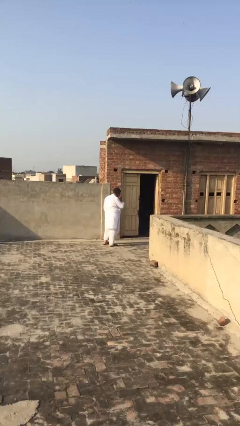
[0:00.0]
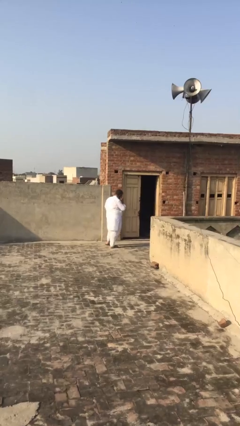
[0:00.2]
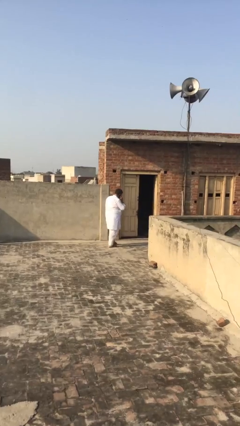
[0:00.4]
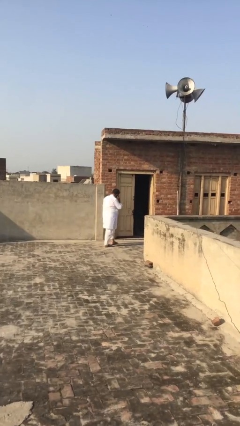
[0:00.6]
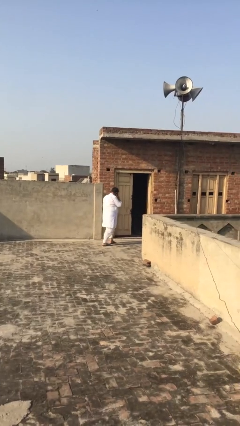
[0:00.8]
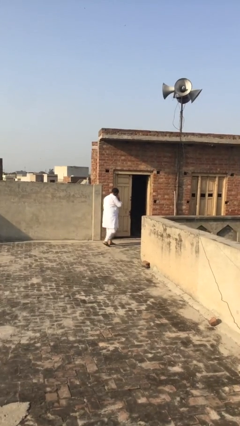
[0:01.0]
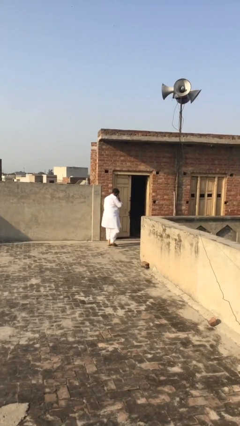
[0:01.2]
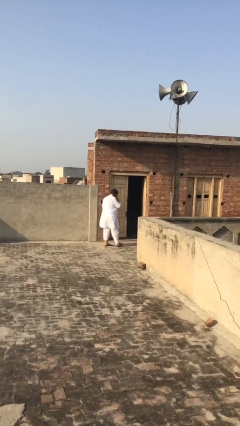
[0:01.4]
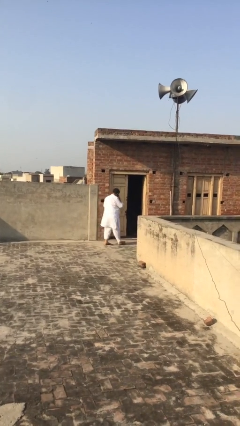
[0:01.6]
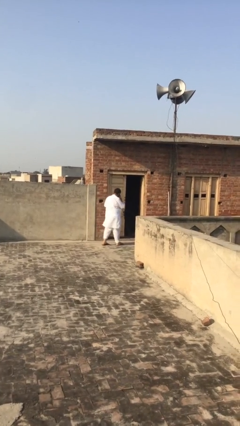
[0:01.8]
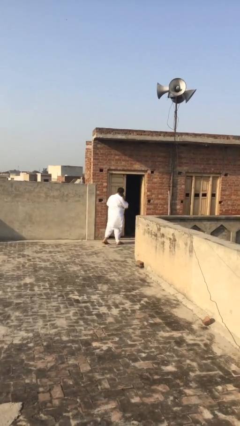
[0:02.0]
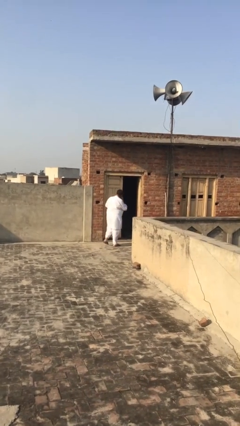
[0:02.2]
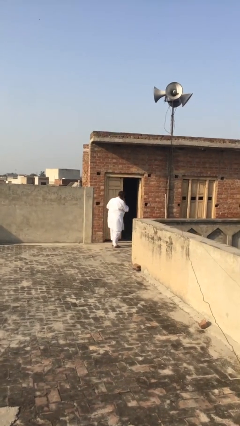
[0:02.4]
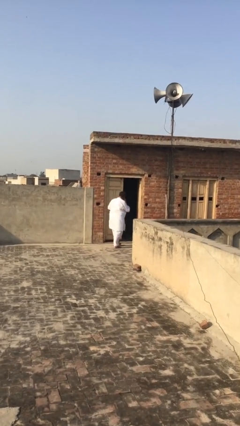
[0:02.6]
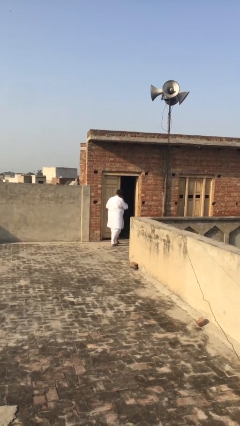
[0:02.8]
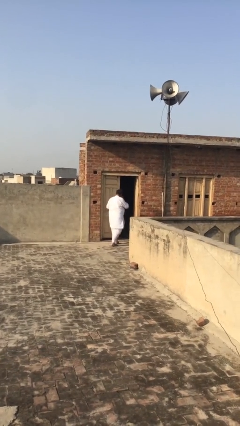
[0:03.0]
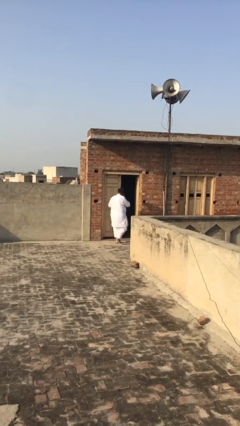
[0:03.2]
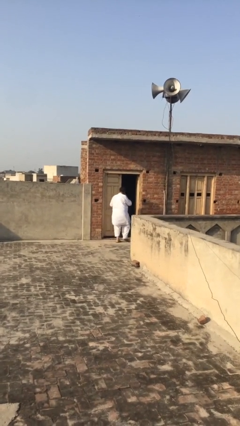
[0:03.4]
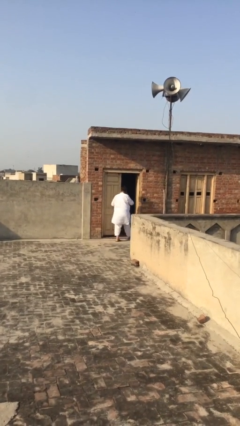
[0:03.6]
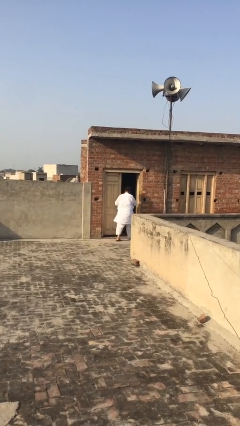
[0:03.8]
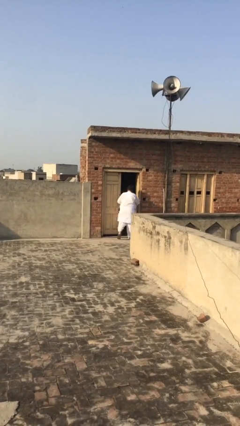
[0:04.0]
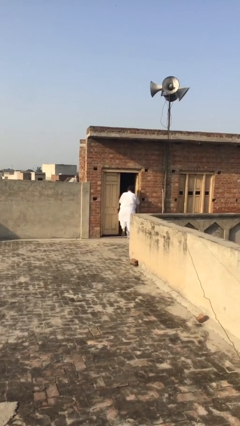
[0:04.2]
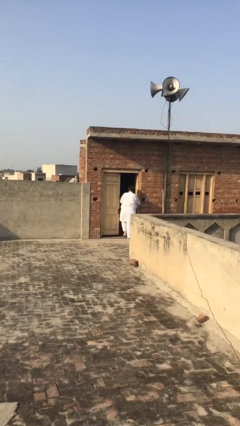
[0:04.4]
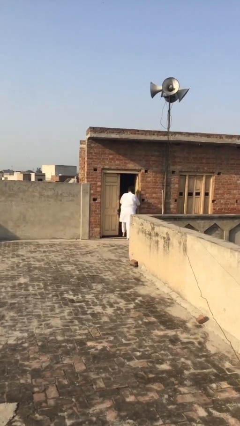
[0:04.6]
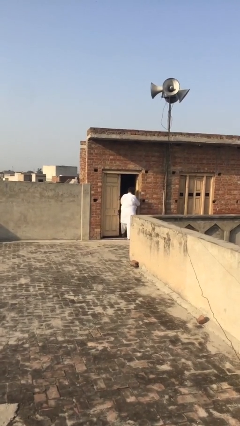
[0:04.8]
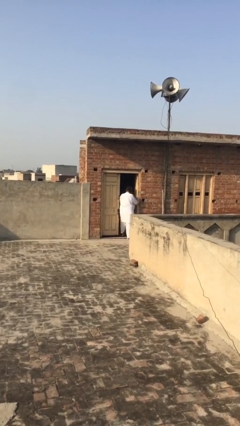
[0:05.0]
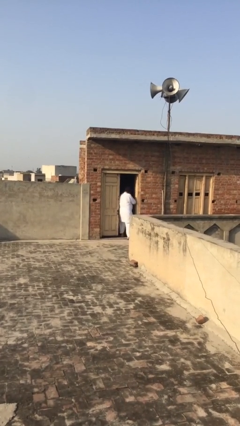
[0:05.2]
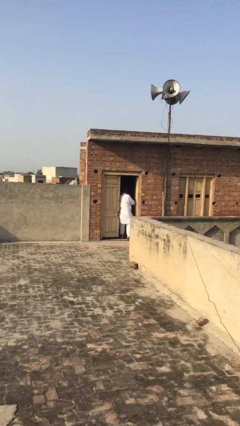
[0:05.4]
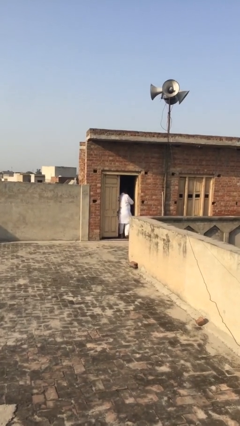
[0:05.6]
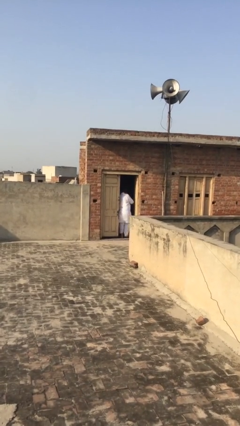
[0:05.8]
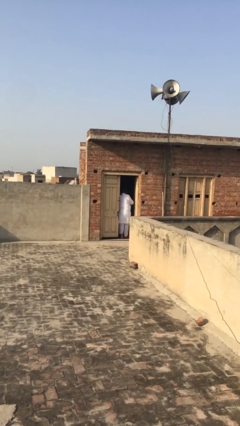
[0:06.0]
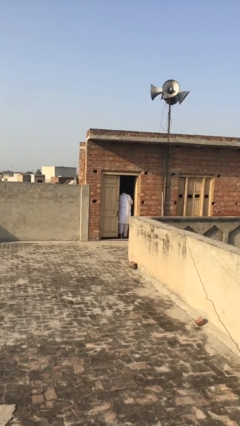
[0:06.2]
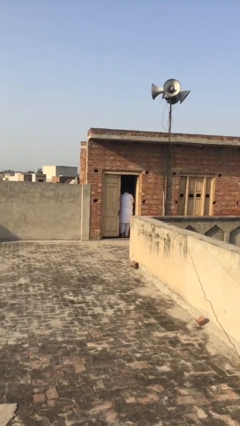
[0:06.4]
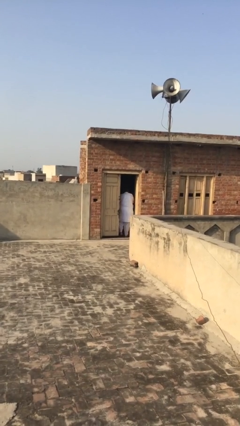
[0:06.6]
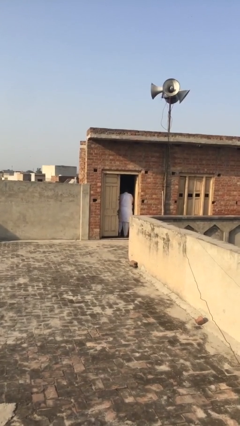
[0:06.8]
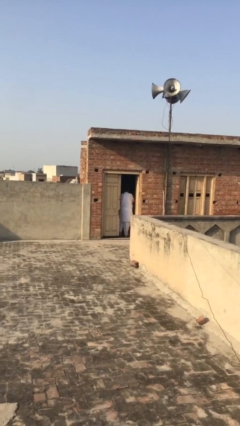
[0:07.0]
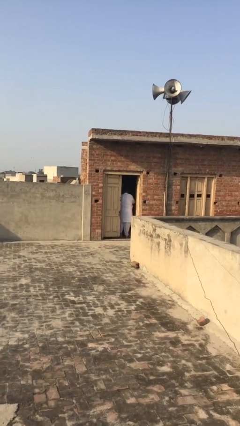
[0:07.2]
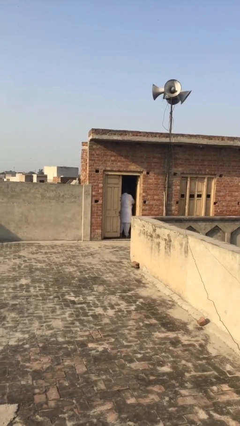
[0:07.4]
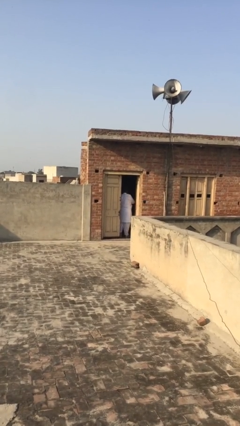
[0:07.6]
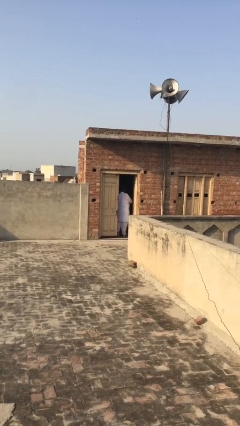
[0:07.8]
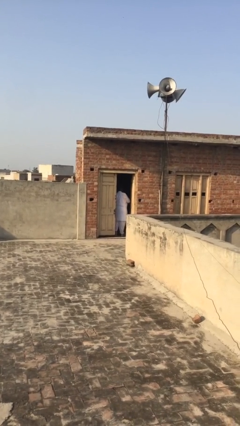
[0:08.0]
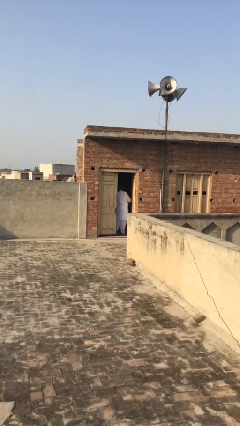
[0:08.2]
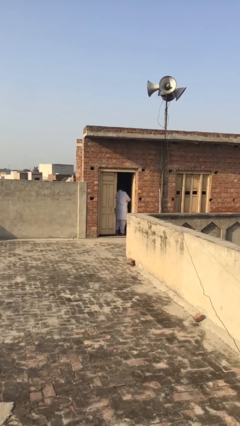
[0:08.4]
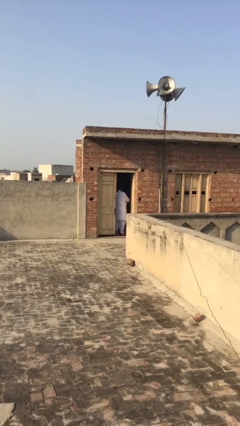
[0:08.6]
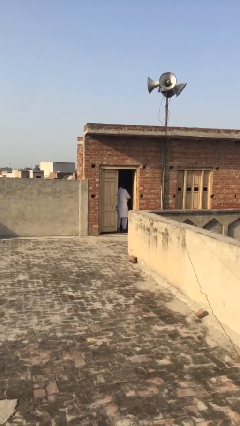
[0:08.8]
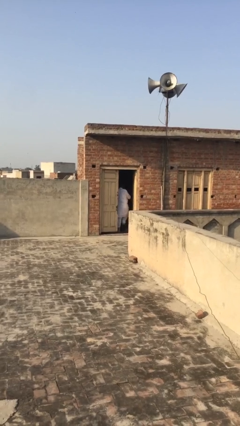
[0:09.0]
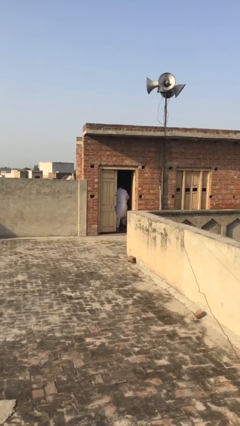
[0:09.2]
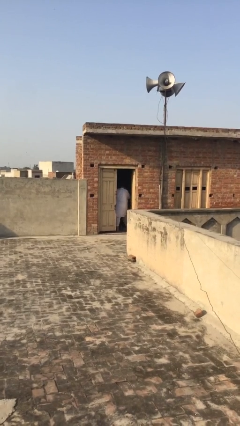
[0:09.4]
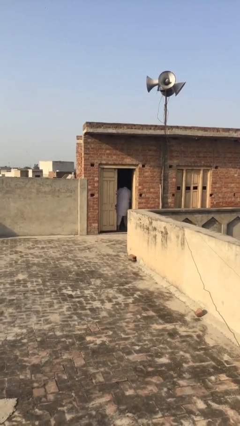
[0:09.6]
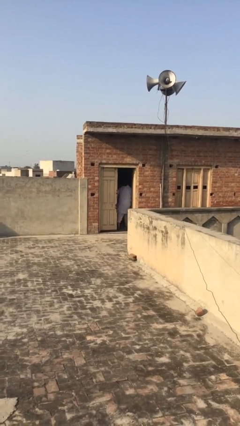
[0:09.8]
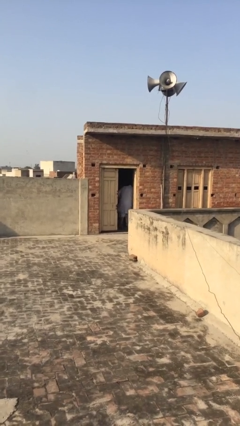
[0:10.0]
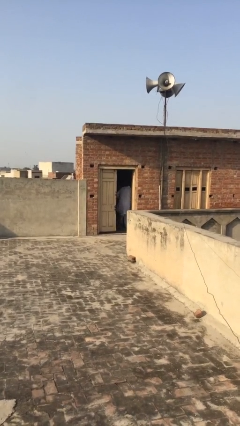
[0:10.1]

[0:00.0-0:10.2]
person exits scene through structure

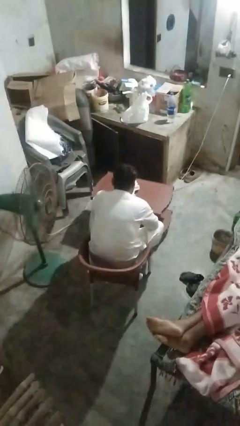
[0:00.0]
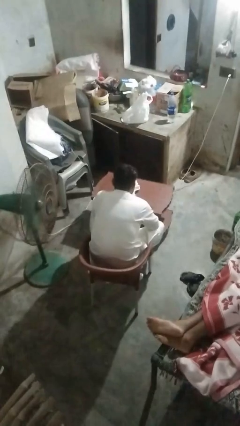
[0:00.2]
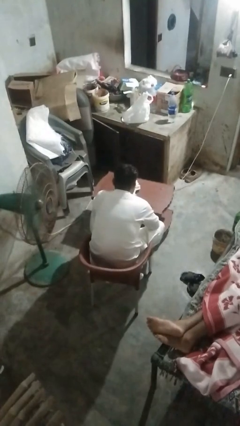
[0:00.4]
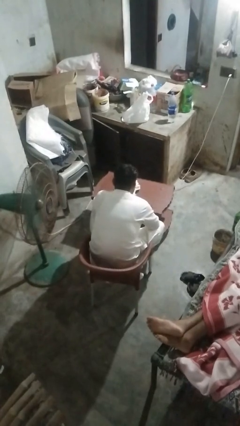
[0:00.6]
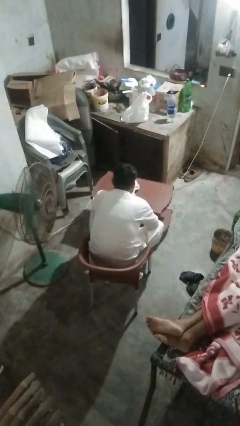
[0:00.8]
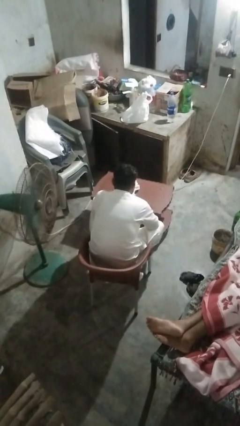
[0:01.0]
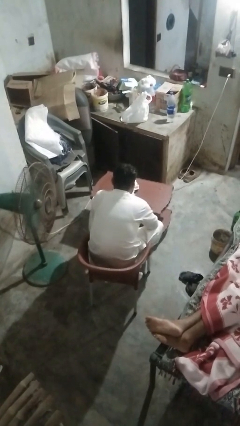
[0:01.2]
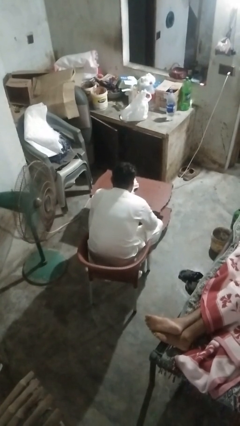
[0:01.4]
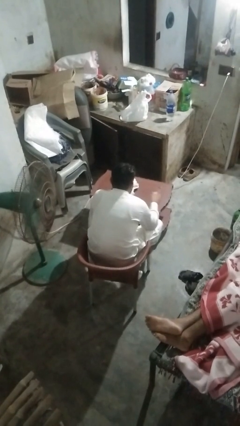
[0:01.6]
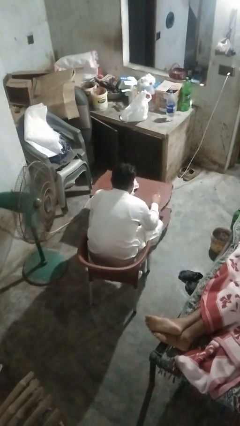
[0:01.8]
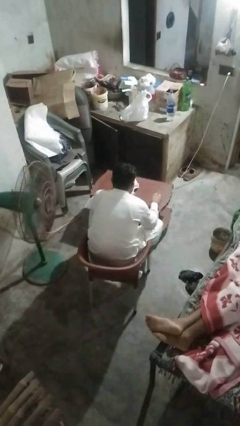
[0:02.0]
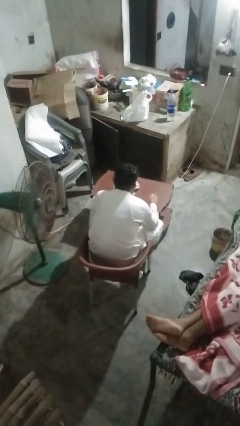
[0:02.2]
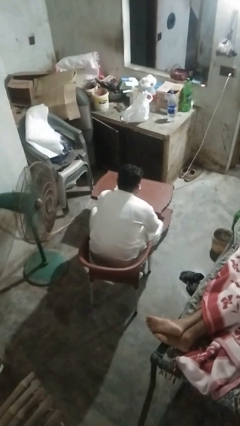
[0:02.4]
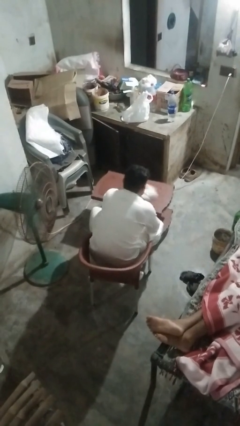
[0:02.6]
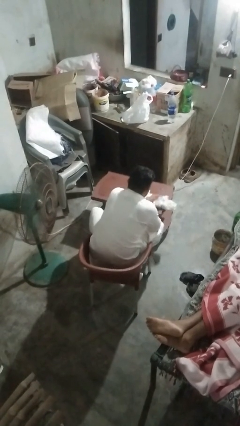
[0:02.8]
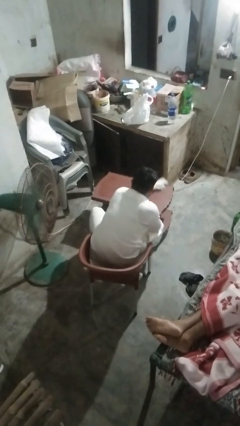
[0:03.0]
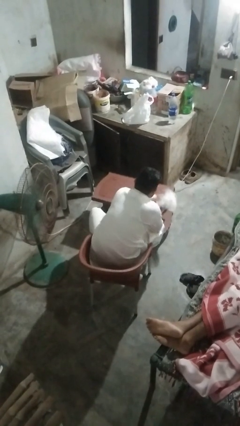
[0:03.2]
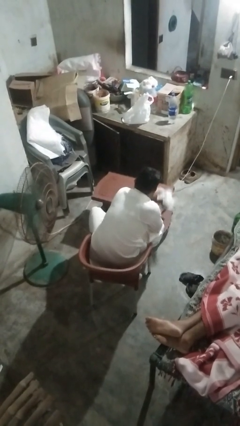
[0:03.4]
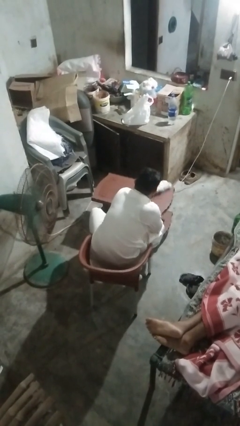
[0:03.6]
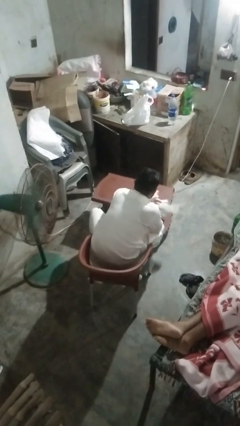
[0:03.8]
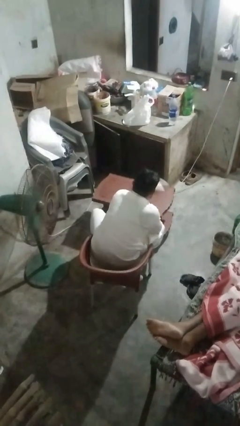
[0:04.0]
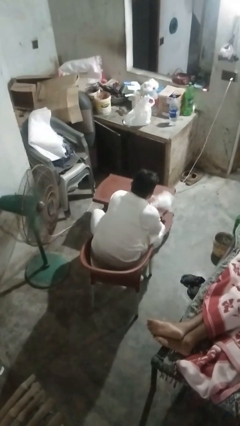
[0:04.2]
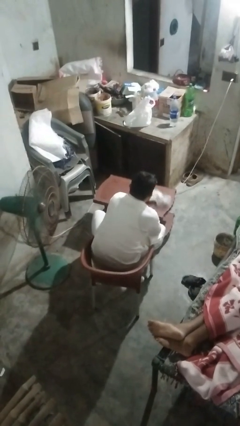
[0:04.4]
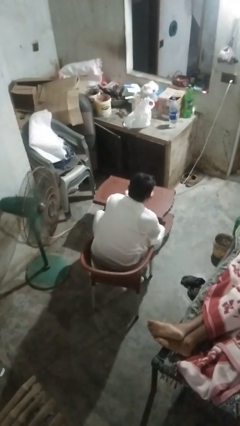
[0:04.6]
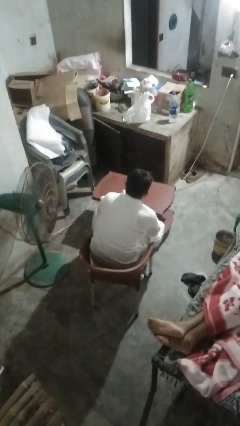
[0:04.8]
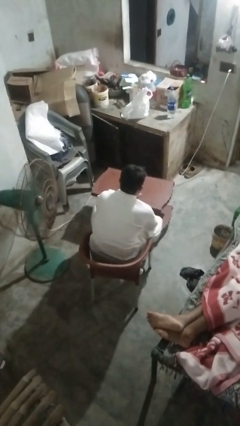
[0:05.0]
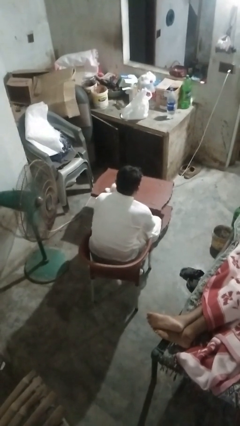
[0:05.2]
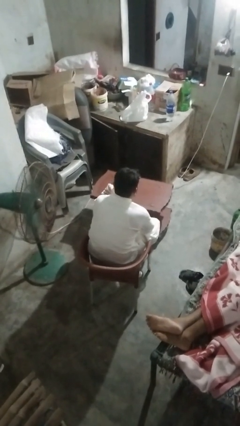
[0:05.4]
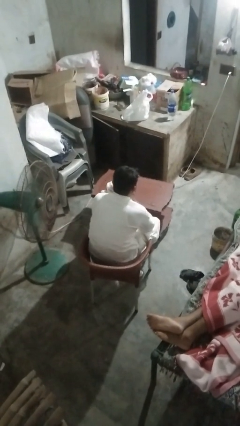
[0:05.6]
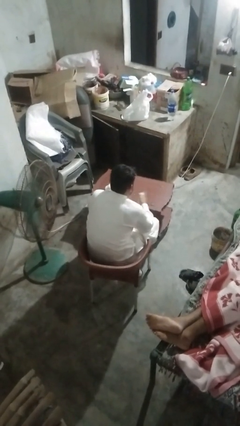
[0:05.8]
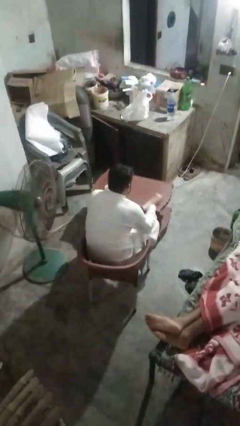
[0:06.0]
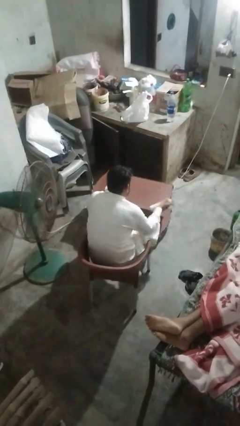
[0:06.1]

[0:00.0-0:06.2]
person sprays from bottle

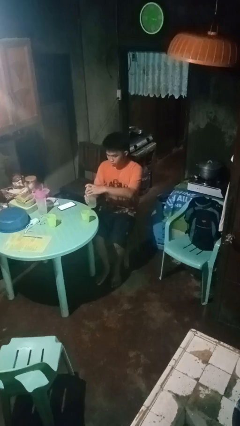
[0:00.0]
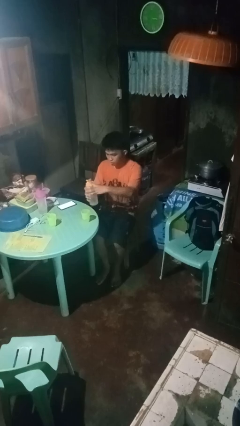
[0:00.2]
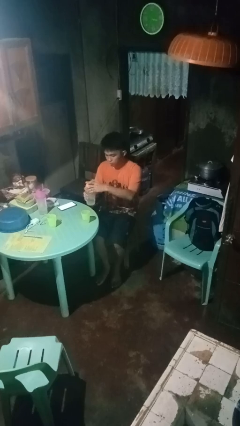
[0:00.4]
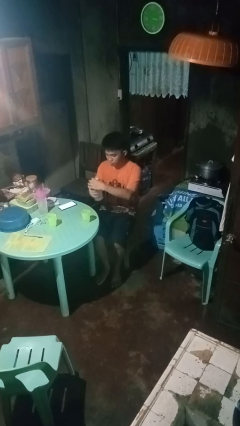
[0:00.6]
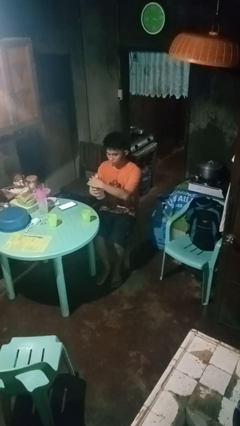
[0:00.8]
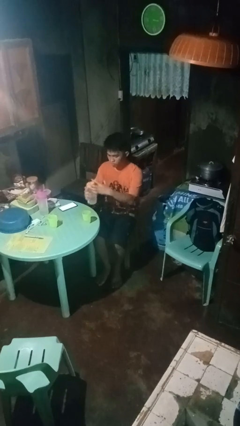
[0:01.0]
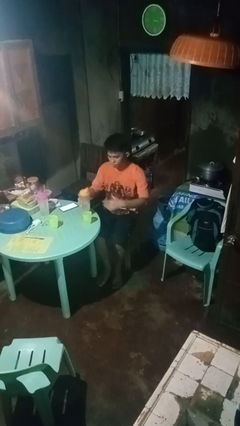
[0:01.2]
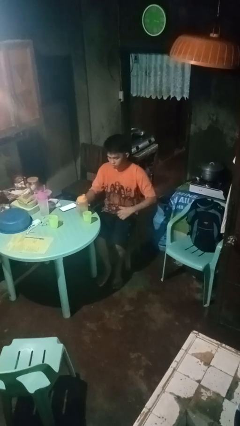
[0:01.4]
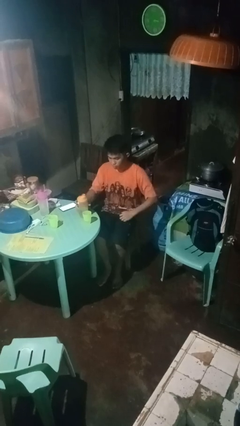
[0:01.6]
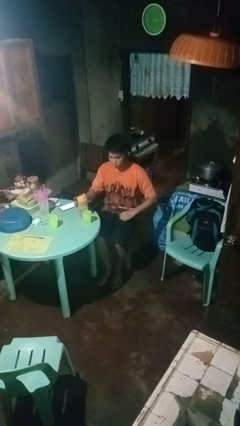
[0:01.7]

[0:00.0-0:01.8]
person screws lid to bottle
